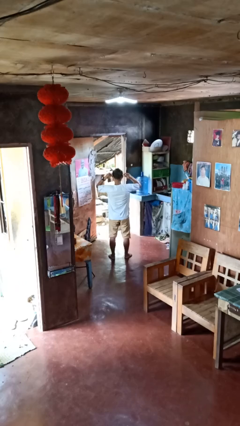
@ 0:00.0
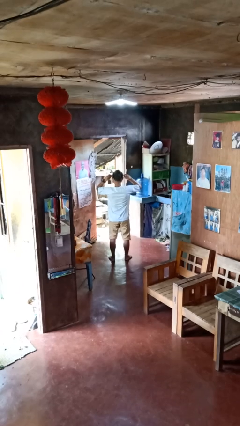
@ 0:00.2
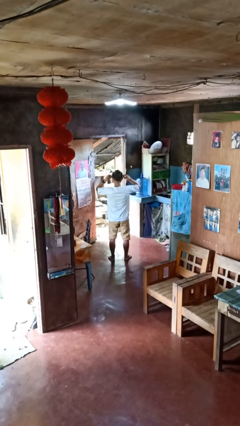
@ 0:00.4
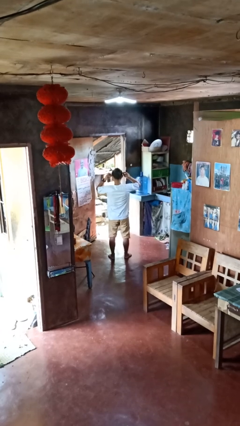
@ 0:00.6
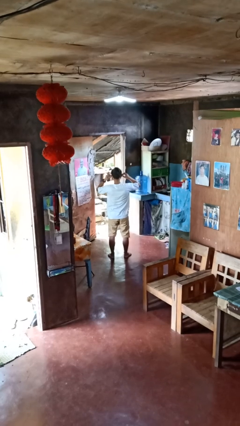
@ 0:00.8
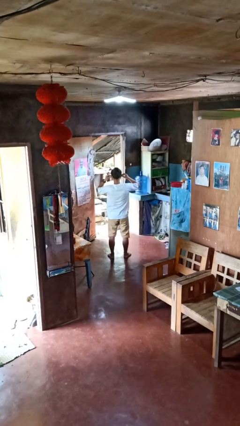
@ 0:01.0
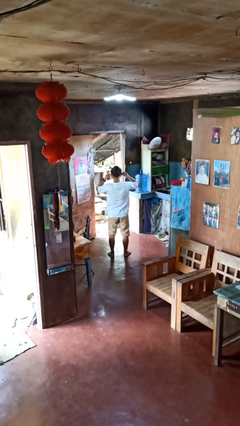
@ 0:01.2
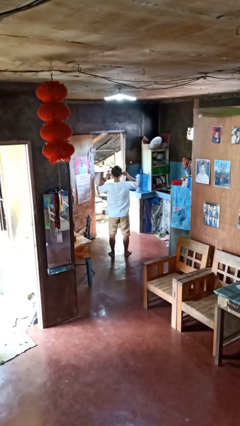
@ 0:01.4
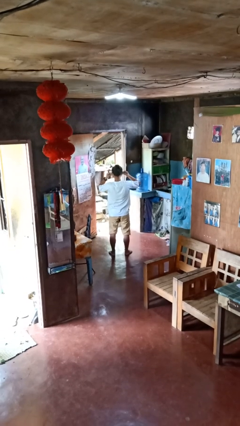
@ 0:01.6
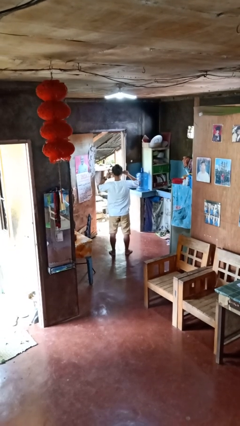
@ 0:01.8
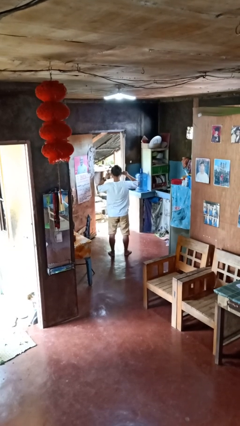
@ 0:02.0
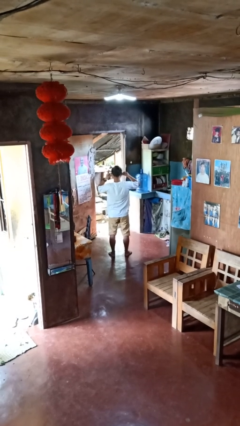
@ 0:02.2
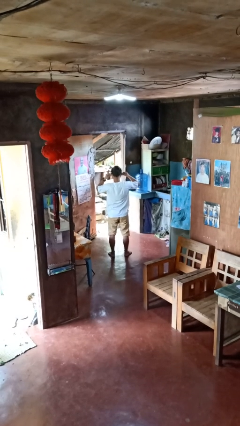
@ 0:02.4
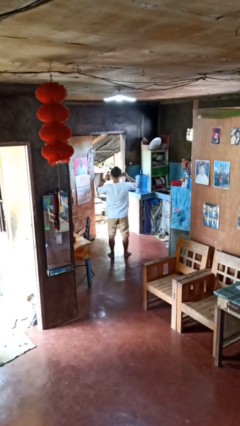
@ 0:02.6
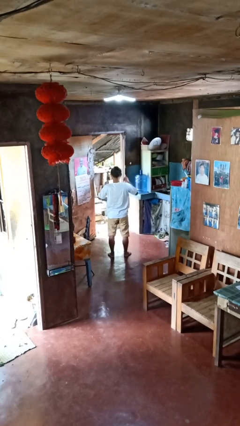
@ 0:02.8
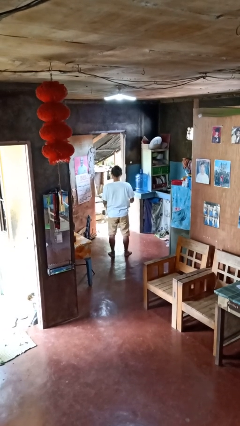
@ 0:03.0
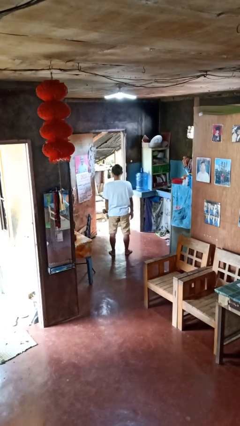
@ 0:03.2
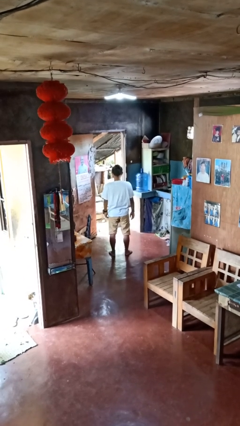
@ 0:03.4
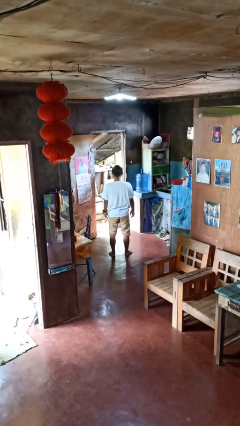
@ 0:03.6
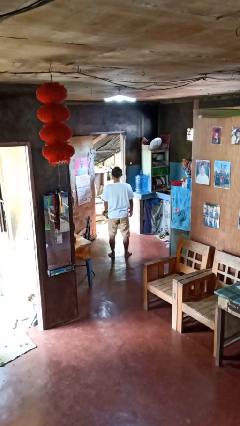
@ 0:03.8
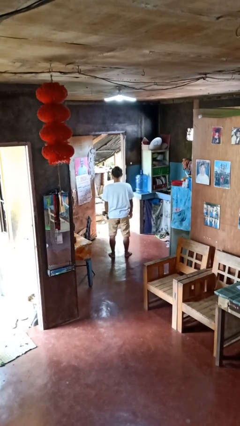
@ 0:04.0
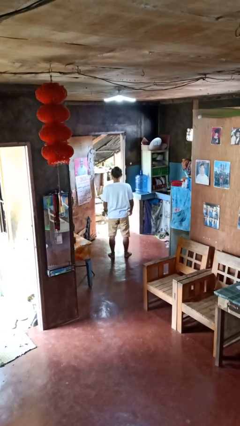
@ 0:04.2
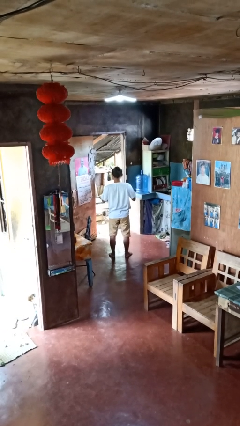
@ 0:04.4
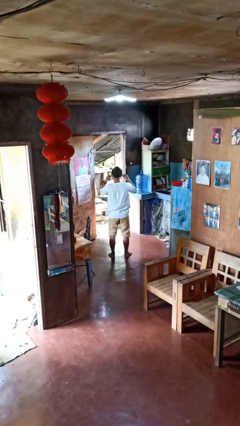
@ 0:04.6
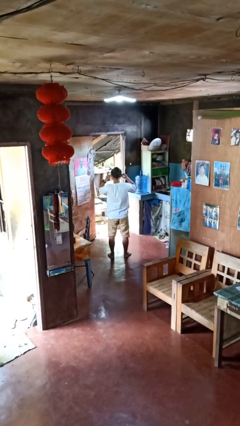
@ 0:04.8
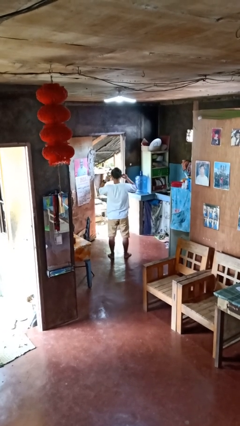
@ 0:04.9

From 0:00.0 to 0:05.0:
person puts on headphones

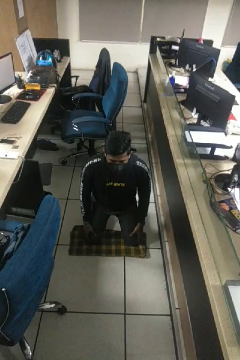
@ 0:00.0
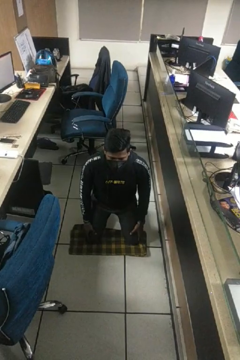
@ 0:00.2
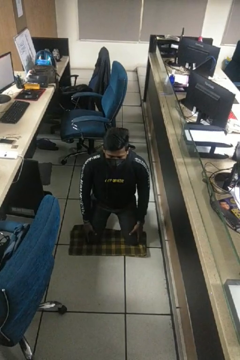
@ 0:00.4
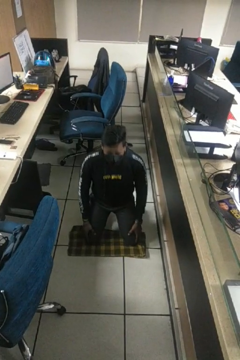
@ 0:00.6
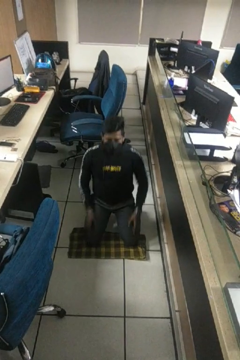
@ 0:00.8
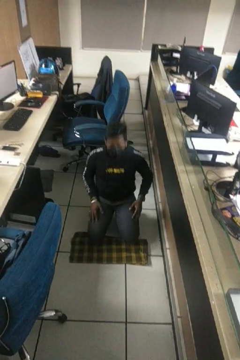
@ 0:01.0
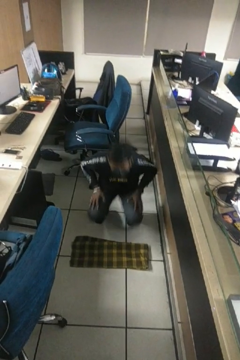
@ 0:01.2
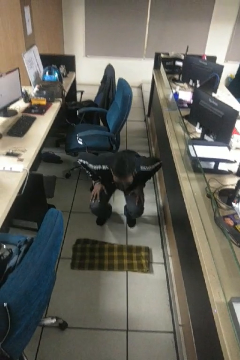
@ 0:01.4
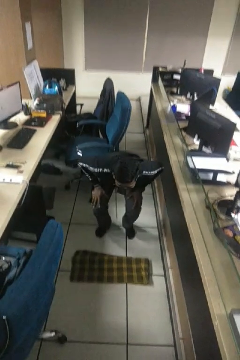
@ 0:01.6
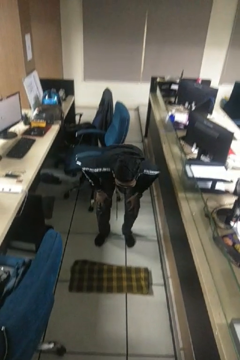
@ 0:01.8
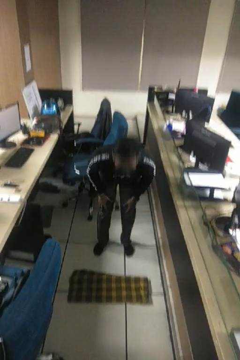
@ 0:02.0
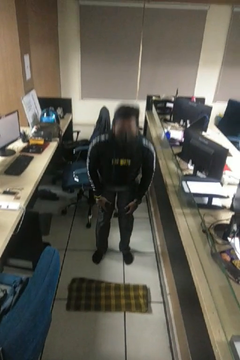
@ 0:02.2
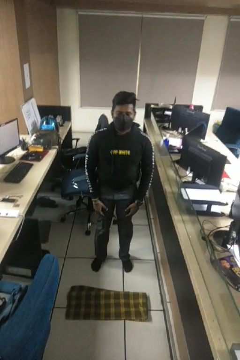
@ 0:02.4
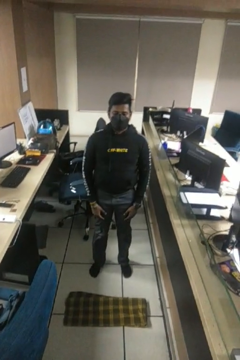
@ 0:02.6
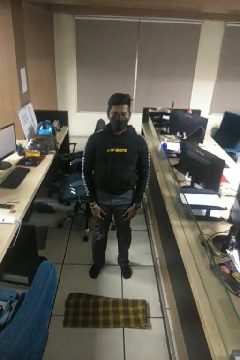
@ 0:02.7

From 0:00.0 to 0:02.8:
person stands up from floor

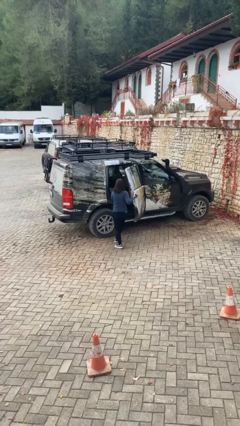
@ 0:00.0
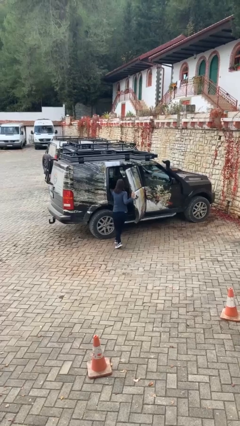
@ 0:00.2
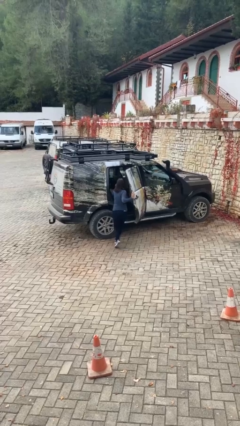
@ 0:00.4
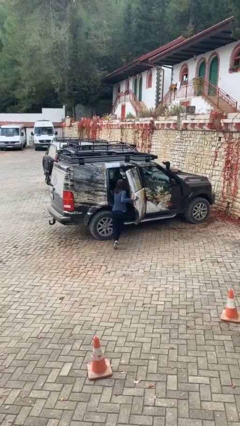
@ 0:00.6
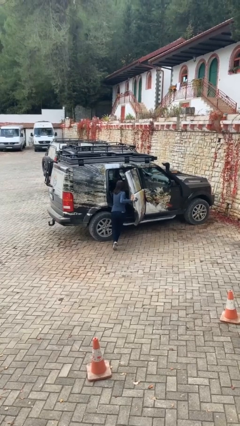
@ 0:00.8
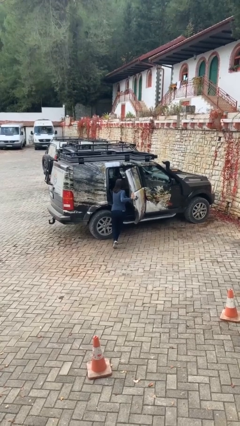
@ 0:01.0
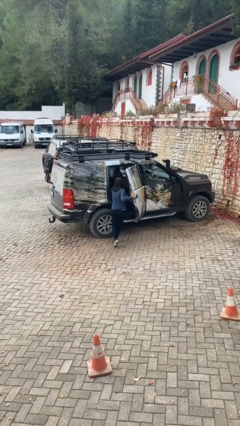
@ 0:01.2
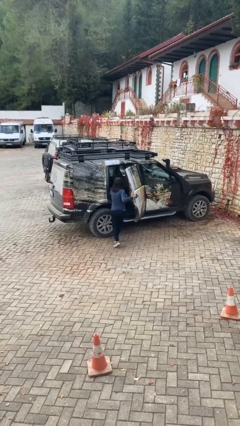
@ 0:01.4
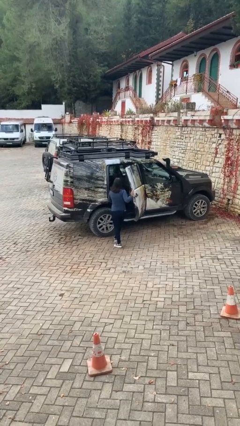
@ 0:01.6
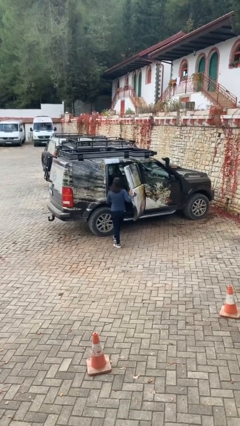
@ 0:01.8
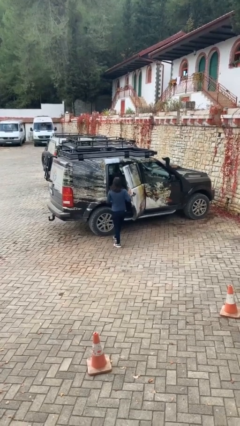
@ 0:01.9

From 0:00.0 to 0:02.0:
person loads car

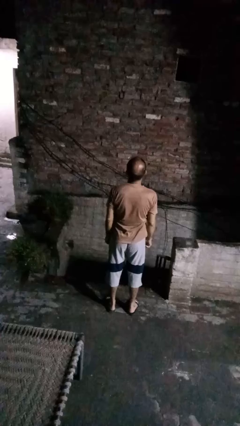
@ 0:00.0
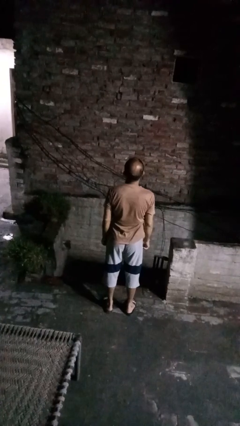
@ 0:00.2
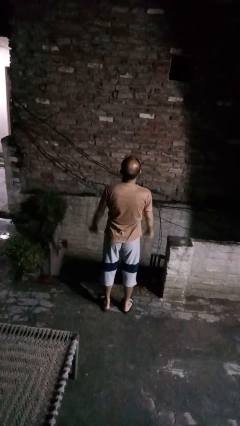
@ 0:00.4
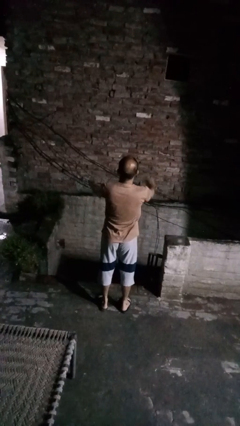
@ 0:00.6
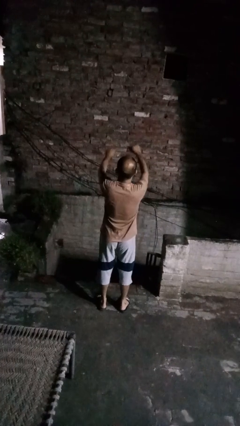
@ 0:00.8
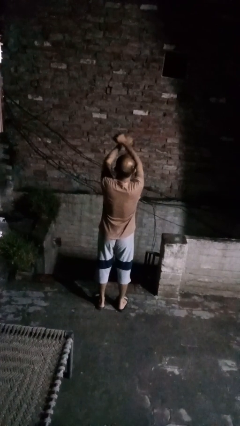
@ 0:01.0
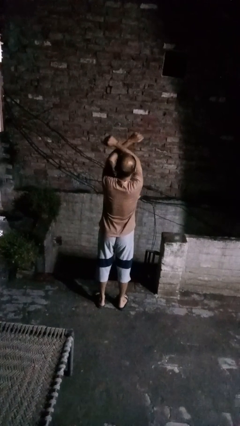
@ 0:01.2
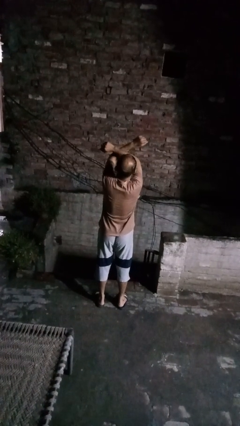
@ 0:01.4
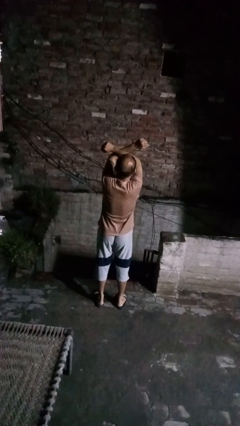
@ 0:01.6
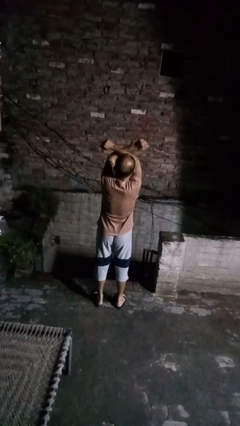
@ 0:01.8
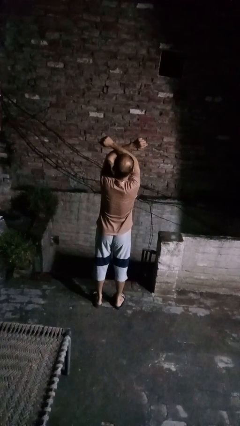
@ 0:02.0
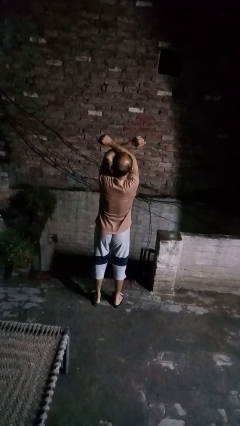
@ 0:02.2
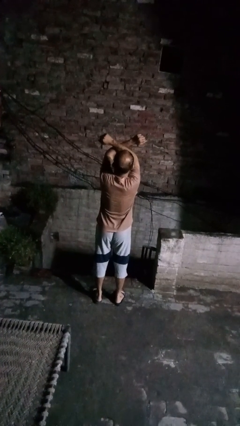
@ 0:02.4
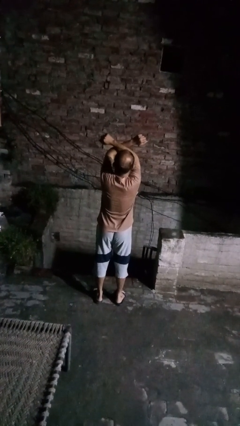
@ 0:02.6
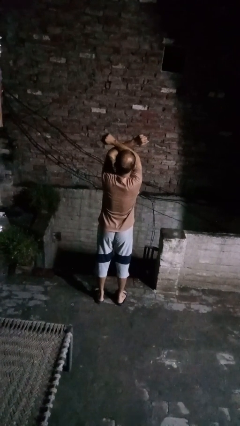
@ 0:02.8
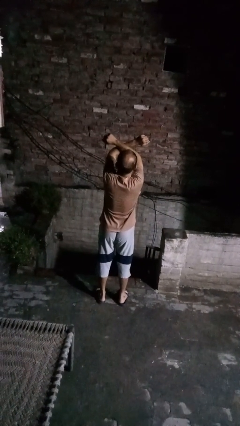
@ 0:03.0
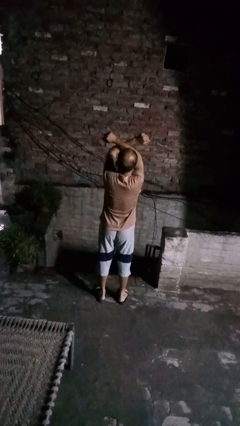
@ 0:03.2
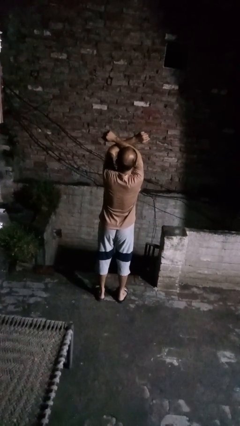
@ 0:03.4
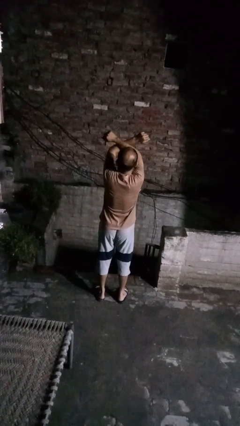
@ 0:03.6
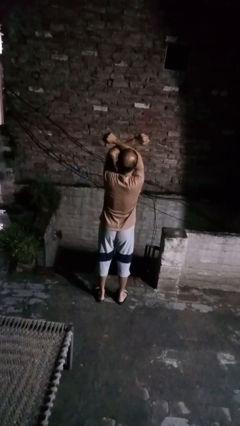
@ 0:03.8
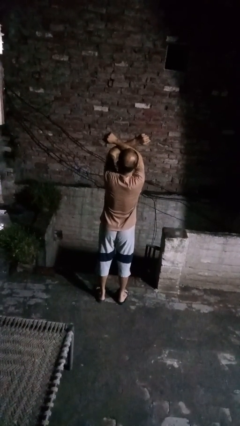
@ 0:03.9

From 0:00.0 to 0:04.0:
person gestures arms x

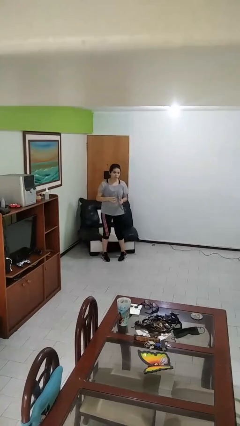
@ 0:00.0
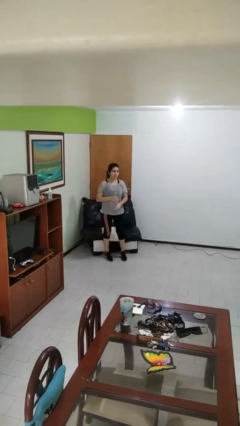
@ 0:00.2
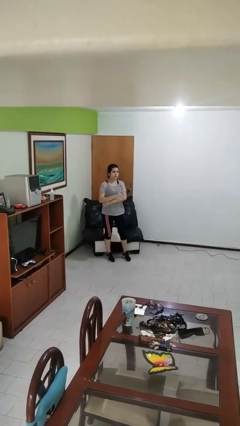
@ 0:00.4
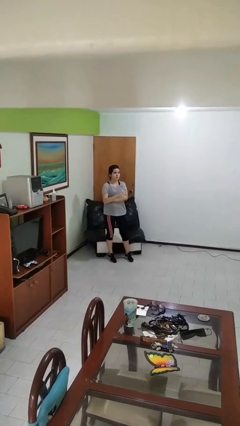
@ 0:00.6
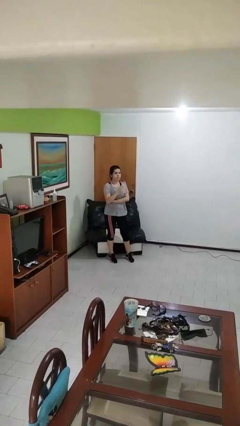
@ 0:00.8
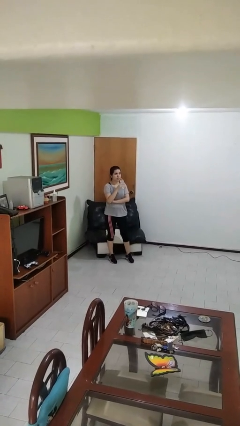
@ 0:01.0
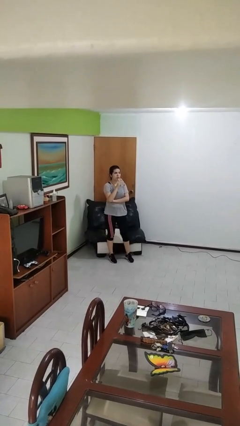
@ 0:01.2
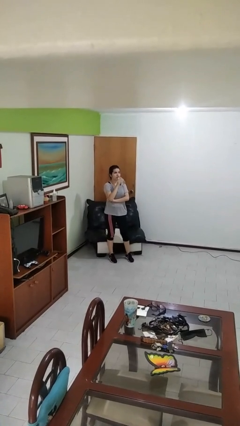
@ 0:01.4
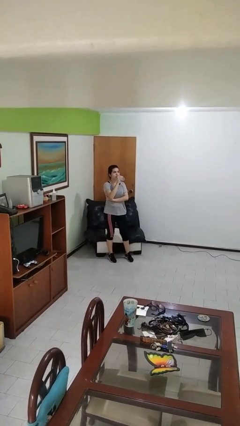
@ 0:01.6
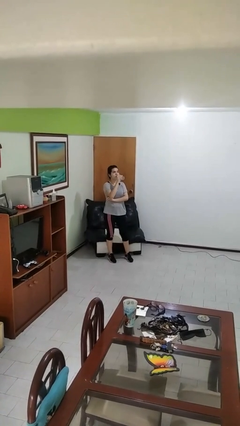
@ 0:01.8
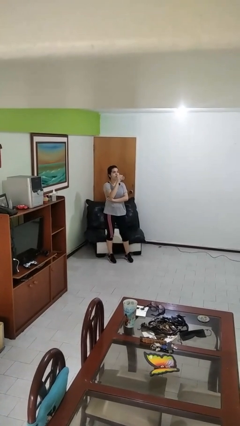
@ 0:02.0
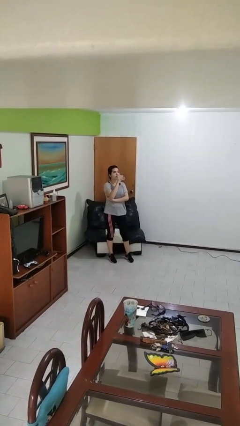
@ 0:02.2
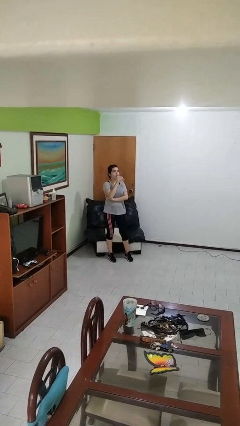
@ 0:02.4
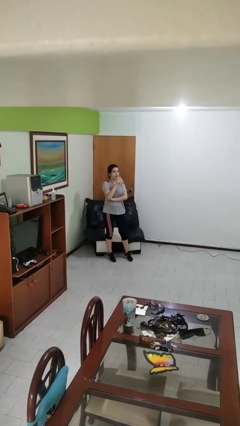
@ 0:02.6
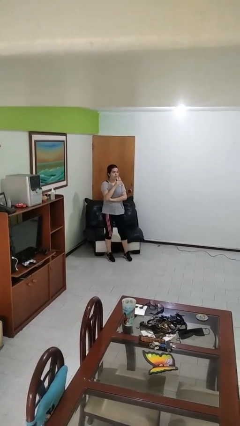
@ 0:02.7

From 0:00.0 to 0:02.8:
person drinks from bottle

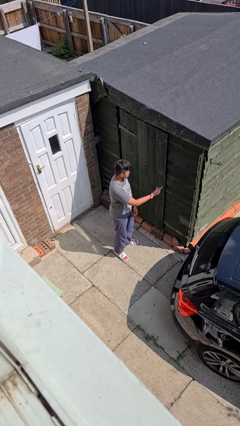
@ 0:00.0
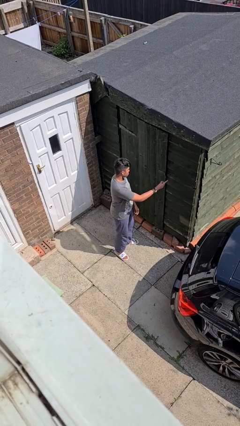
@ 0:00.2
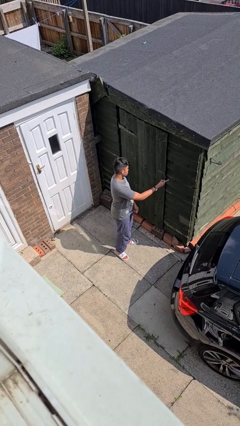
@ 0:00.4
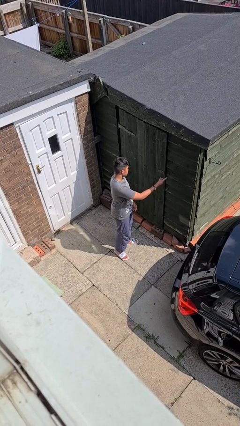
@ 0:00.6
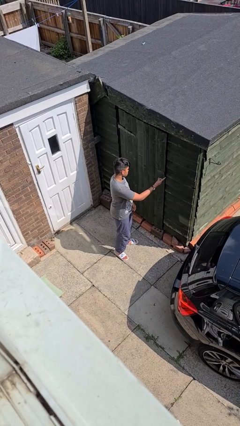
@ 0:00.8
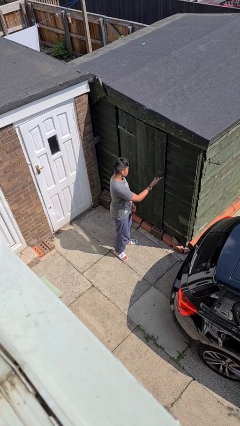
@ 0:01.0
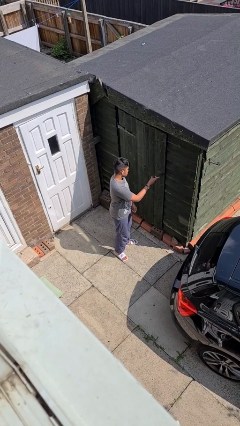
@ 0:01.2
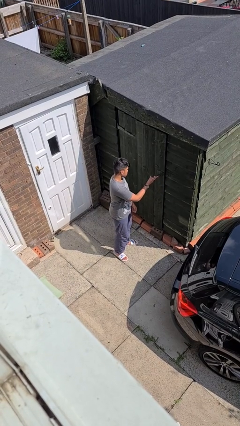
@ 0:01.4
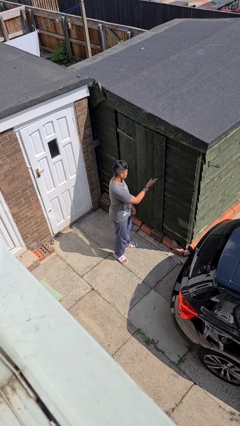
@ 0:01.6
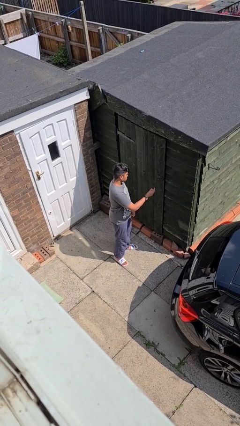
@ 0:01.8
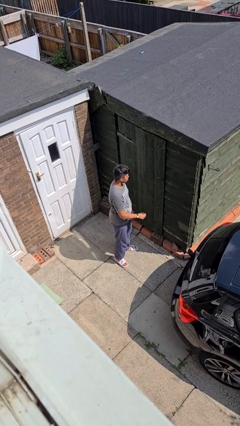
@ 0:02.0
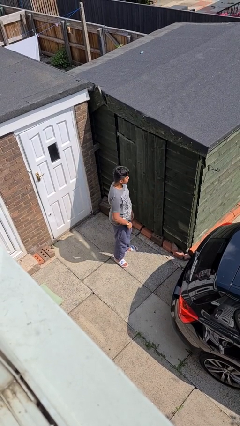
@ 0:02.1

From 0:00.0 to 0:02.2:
person taps object with finger
